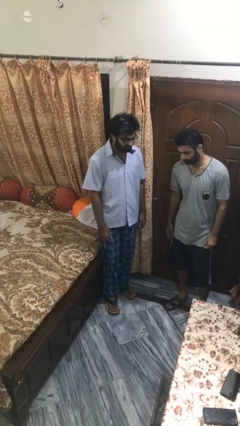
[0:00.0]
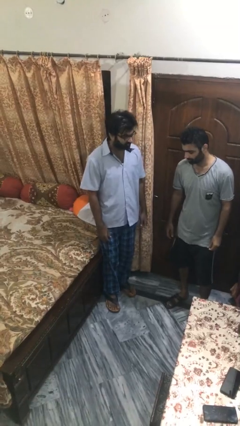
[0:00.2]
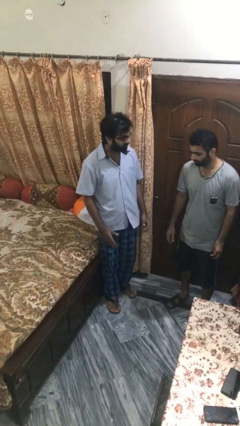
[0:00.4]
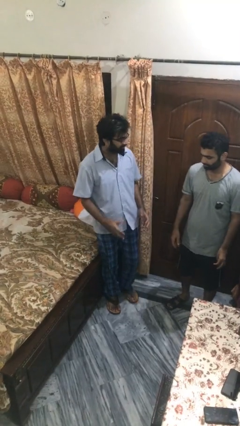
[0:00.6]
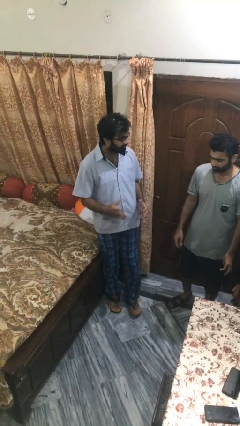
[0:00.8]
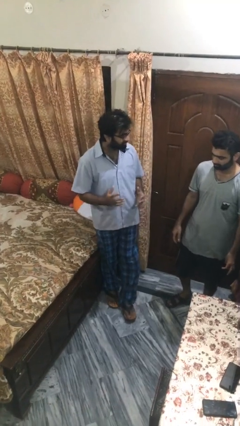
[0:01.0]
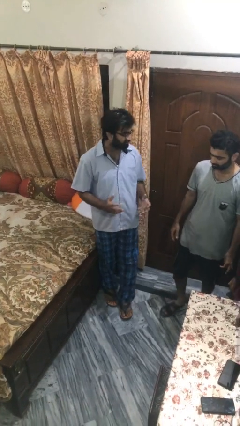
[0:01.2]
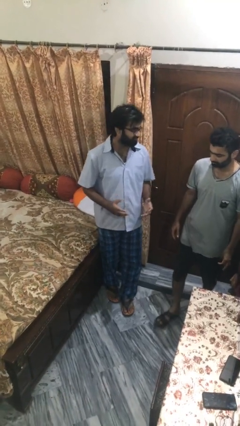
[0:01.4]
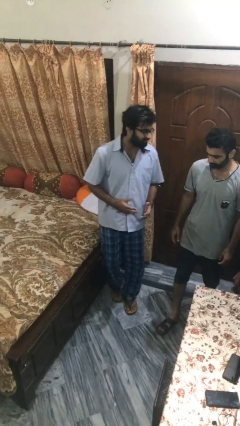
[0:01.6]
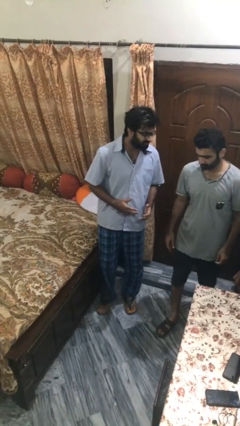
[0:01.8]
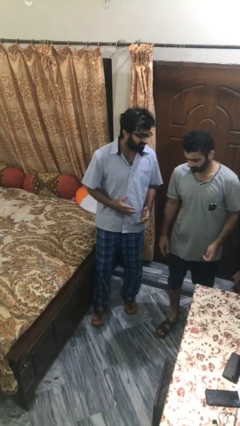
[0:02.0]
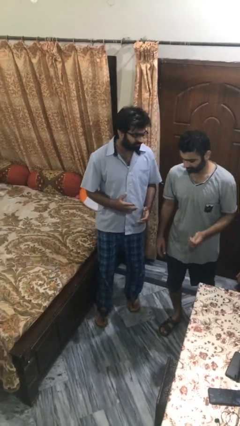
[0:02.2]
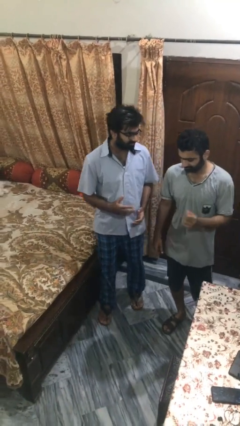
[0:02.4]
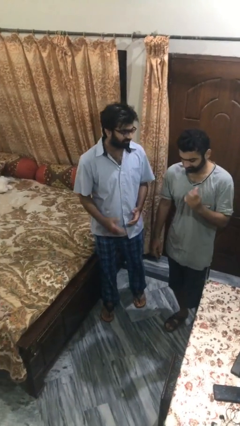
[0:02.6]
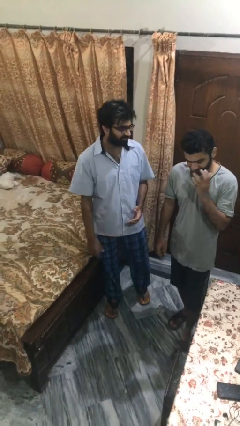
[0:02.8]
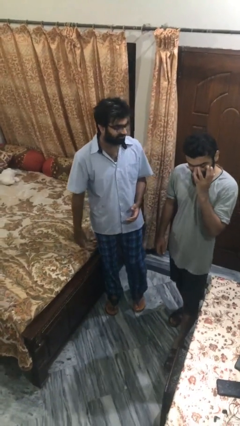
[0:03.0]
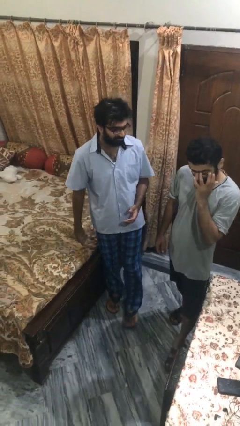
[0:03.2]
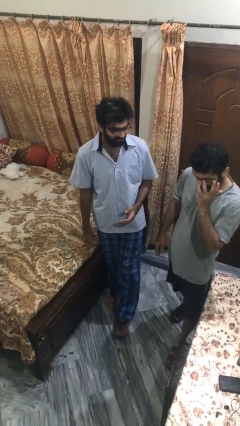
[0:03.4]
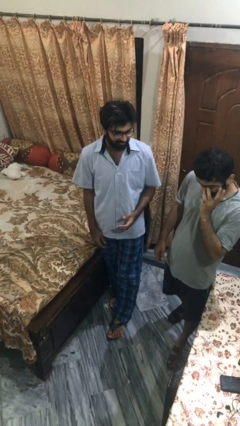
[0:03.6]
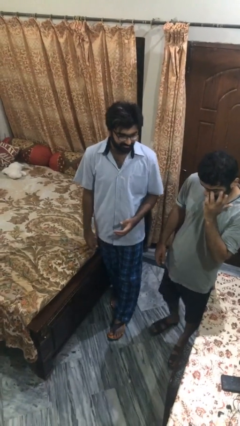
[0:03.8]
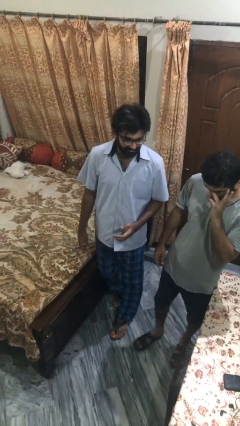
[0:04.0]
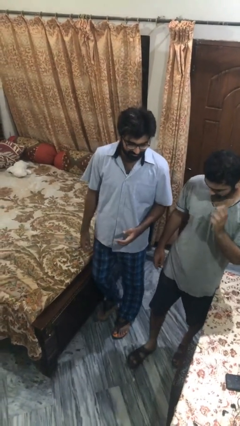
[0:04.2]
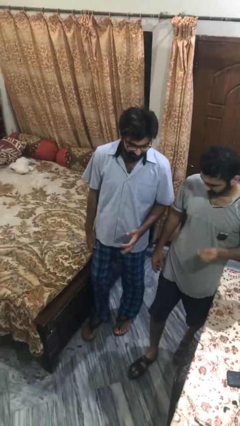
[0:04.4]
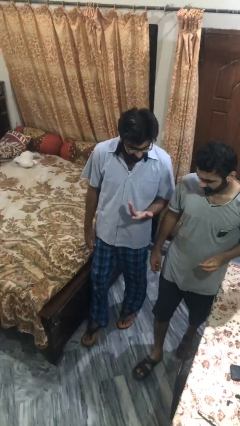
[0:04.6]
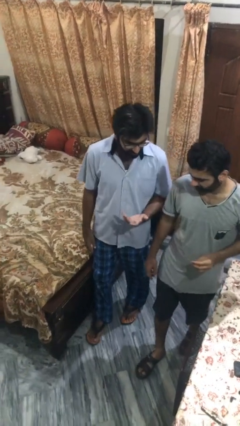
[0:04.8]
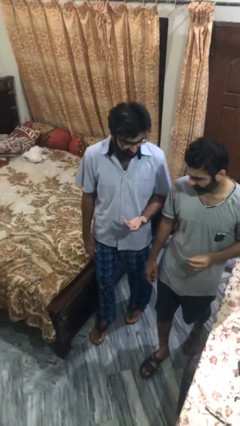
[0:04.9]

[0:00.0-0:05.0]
person talks to person

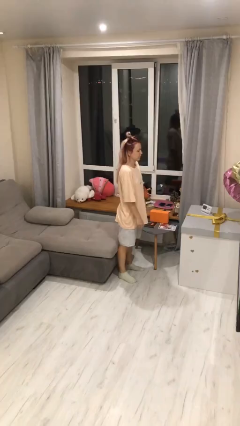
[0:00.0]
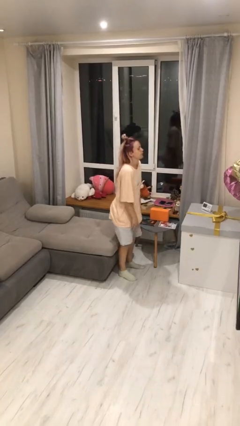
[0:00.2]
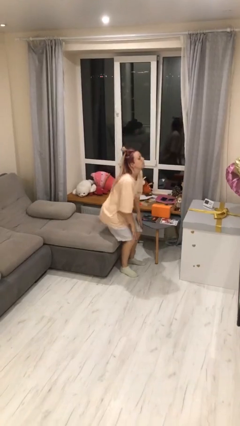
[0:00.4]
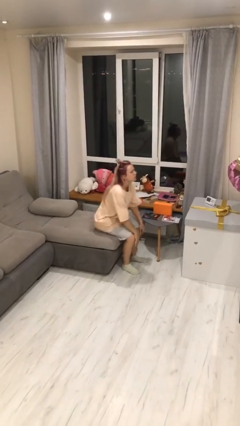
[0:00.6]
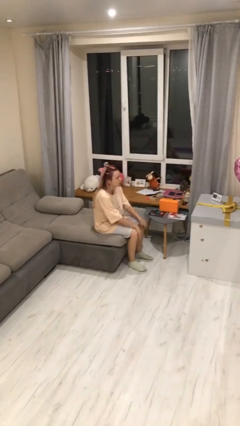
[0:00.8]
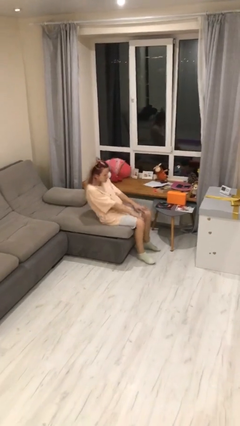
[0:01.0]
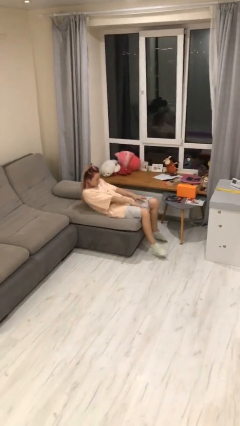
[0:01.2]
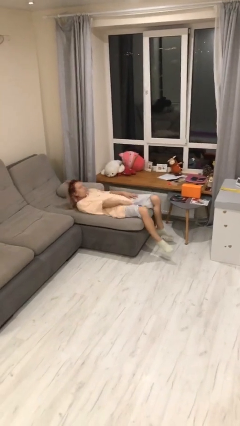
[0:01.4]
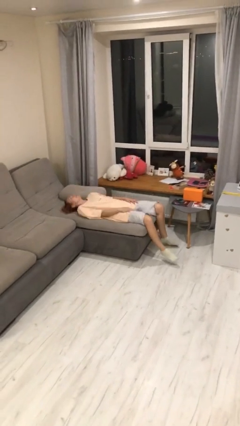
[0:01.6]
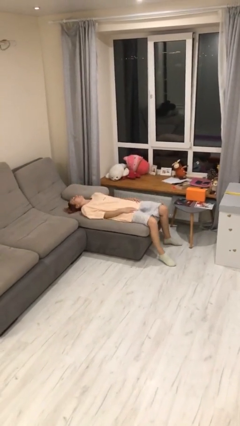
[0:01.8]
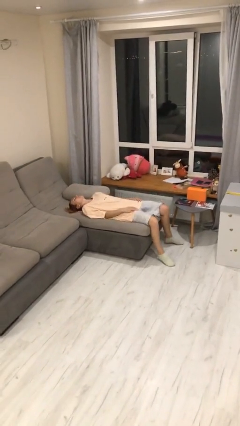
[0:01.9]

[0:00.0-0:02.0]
person lies down on couch

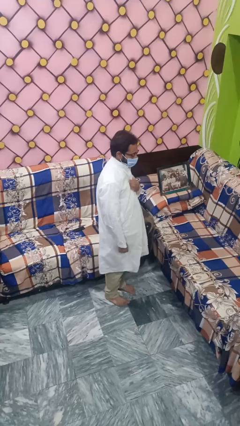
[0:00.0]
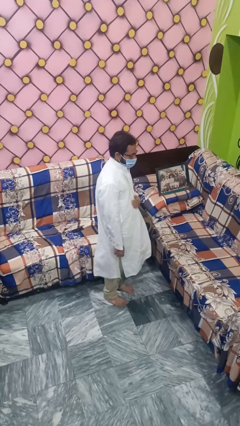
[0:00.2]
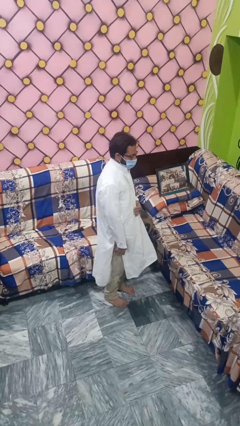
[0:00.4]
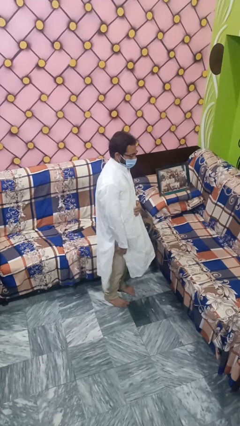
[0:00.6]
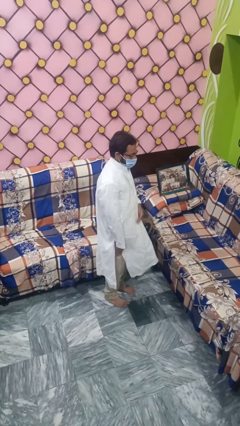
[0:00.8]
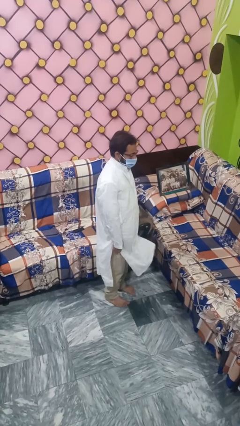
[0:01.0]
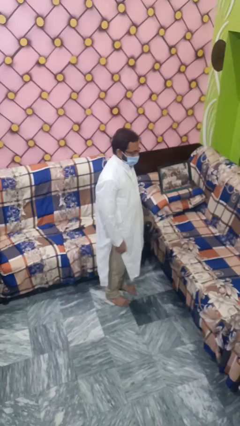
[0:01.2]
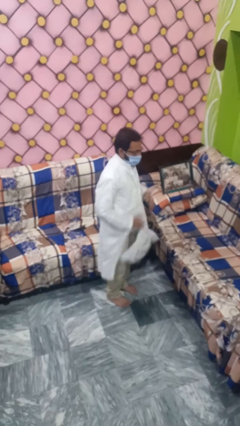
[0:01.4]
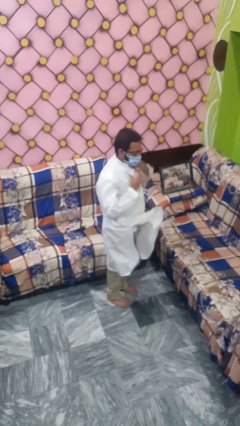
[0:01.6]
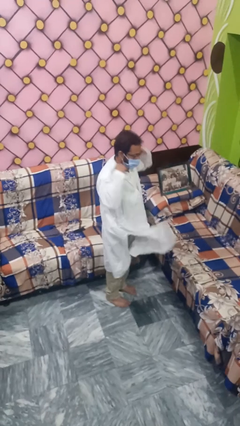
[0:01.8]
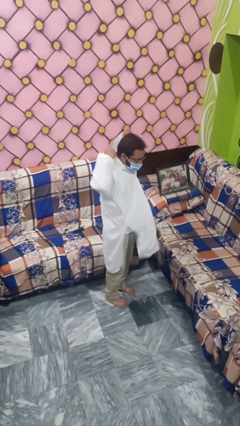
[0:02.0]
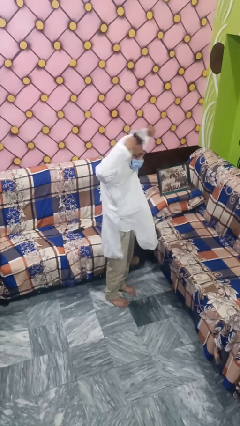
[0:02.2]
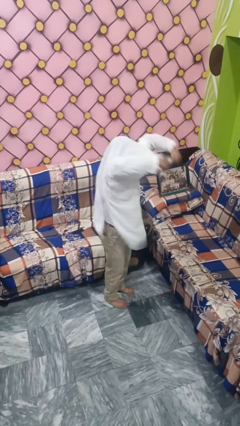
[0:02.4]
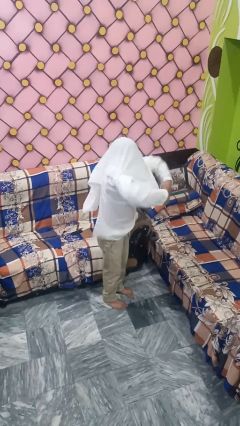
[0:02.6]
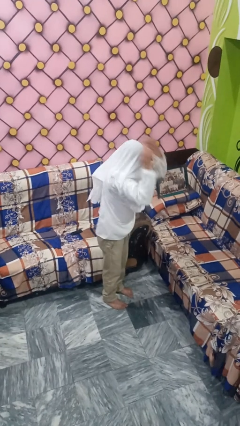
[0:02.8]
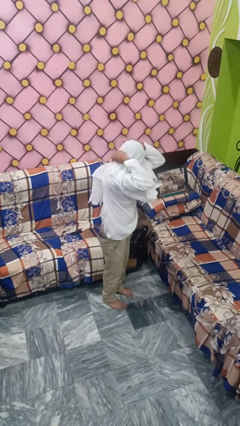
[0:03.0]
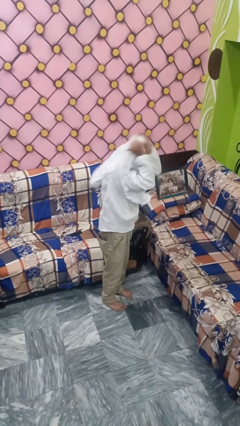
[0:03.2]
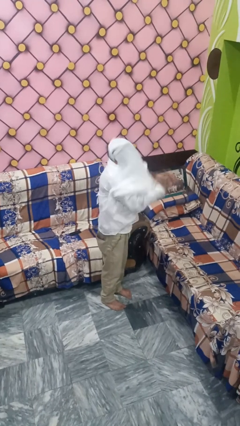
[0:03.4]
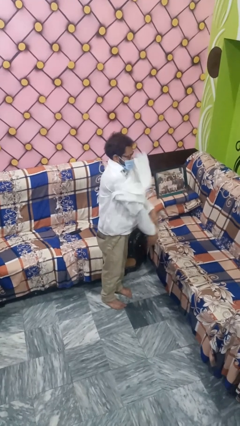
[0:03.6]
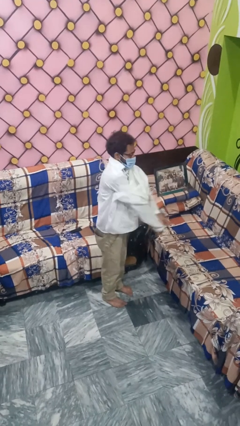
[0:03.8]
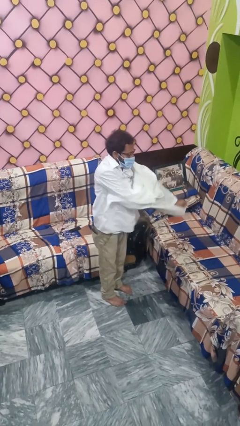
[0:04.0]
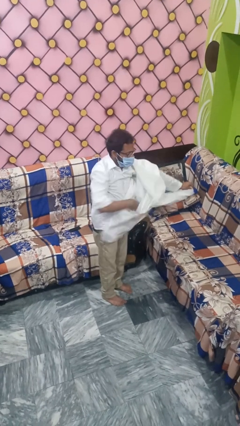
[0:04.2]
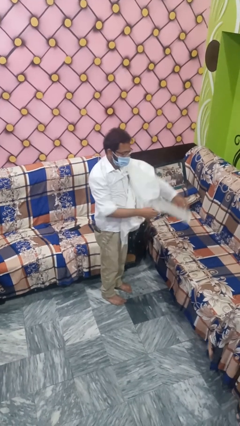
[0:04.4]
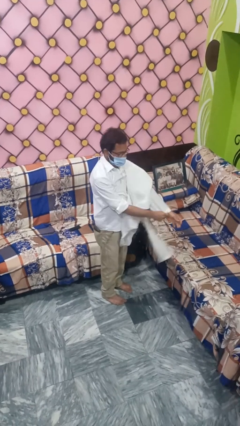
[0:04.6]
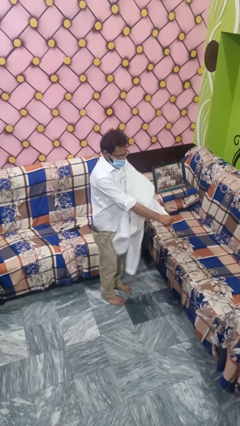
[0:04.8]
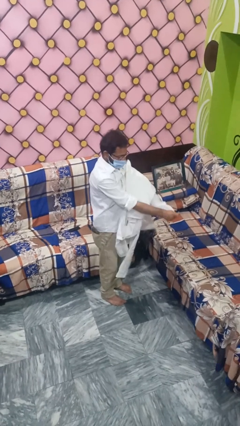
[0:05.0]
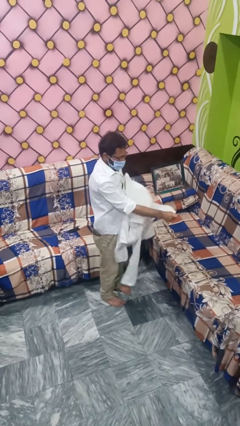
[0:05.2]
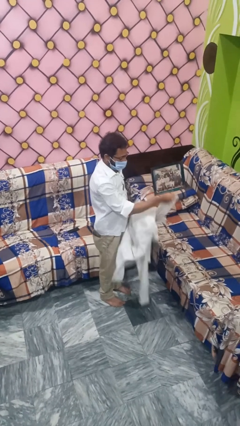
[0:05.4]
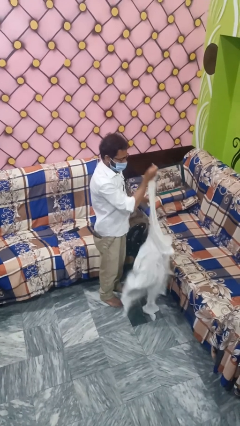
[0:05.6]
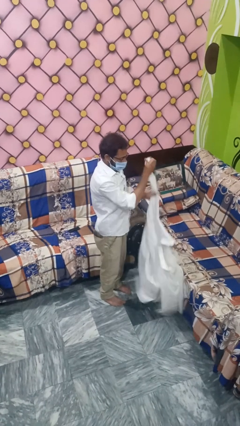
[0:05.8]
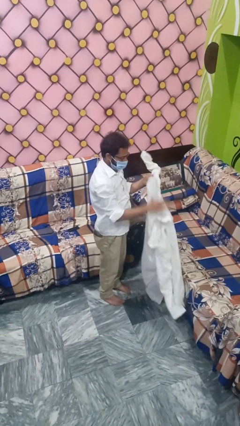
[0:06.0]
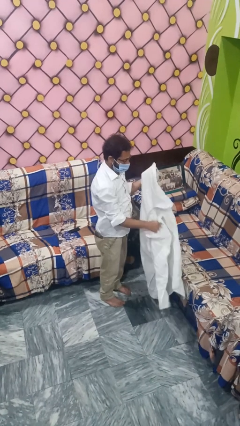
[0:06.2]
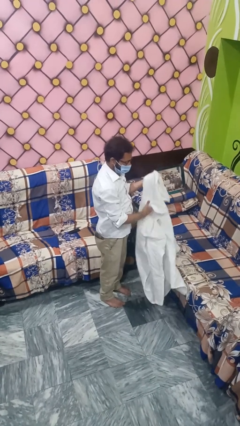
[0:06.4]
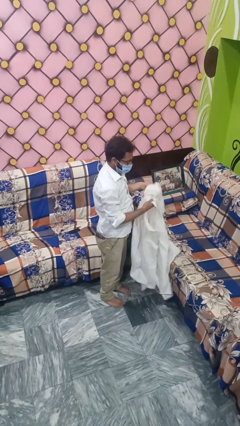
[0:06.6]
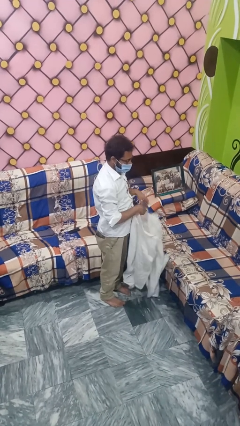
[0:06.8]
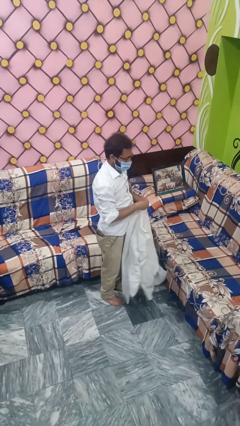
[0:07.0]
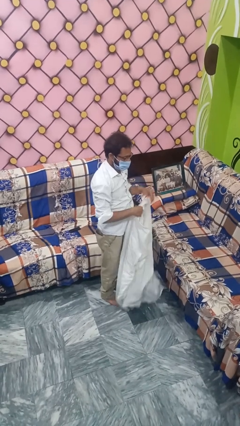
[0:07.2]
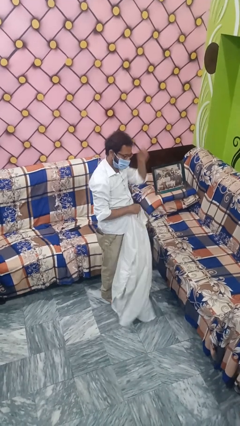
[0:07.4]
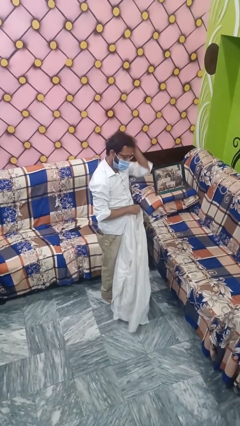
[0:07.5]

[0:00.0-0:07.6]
person takes off shirt

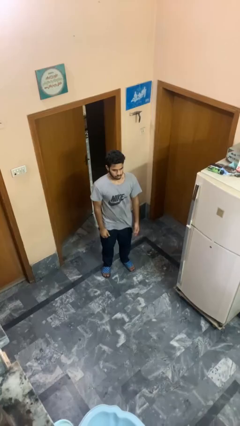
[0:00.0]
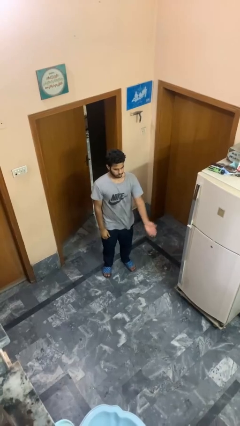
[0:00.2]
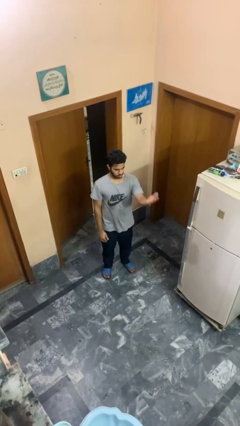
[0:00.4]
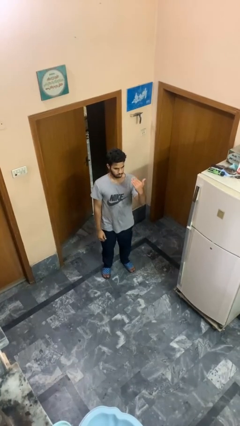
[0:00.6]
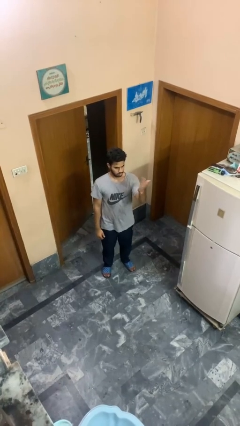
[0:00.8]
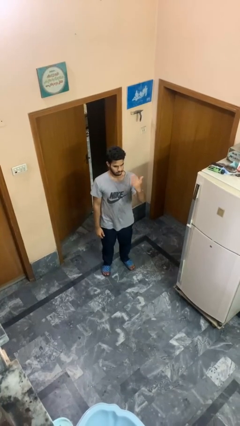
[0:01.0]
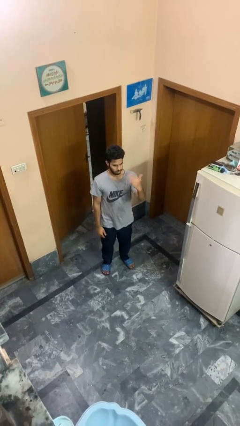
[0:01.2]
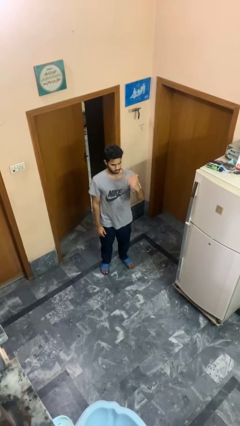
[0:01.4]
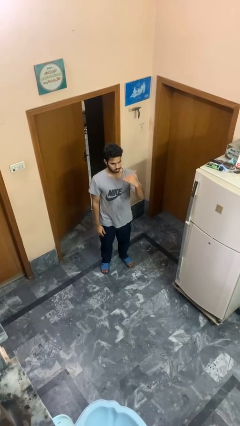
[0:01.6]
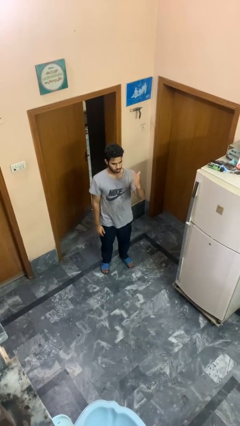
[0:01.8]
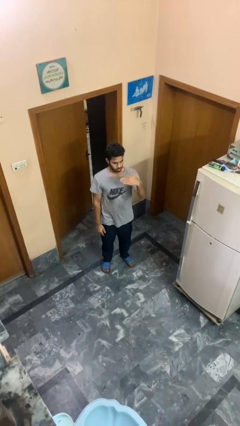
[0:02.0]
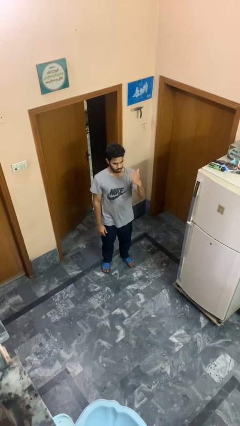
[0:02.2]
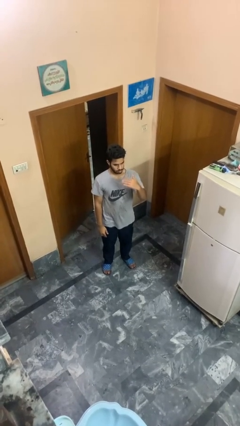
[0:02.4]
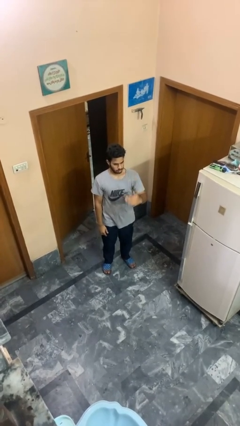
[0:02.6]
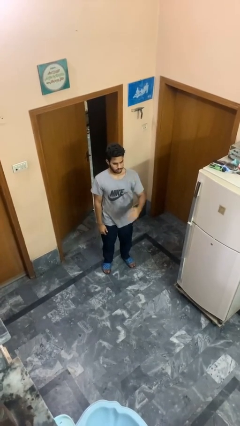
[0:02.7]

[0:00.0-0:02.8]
person gestures come here

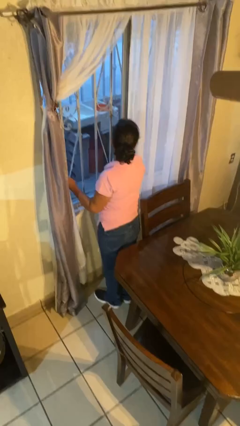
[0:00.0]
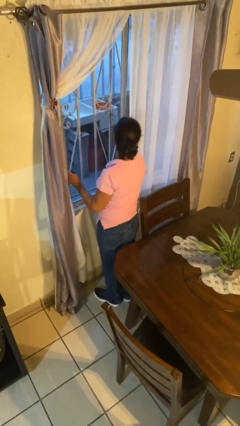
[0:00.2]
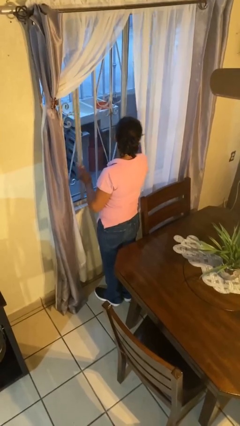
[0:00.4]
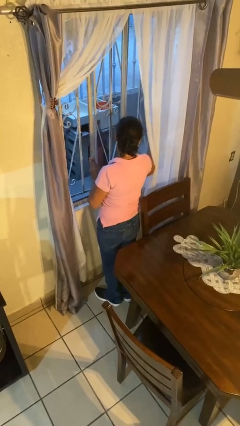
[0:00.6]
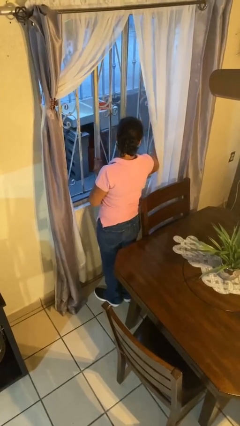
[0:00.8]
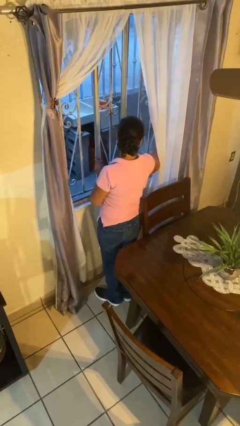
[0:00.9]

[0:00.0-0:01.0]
person opens home window
